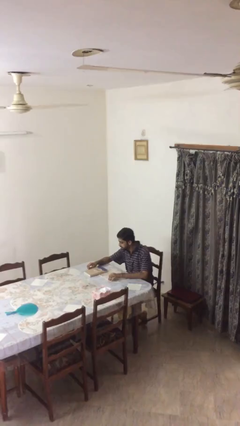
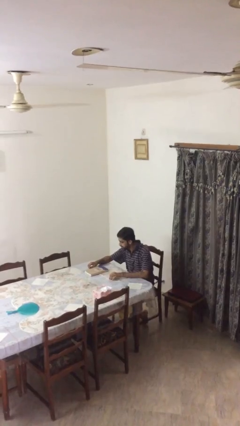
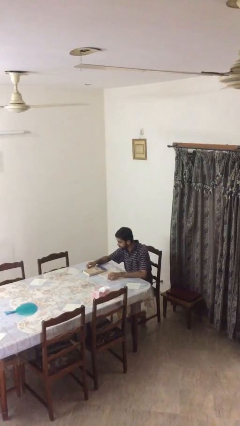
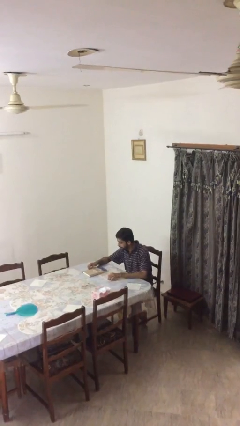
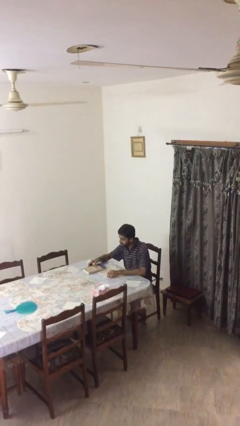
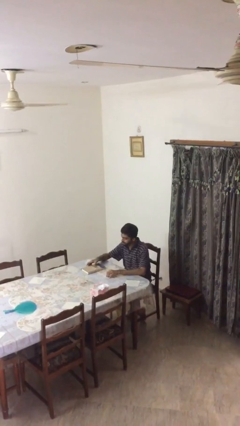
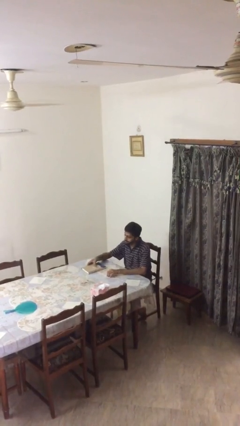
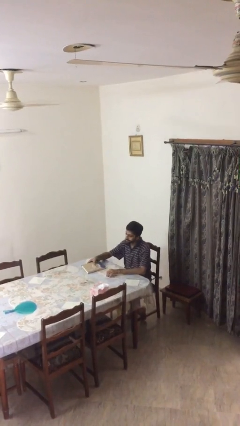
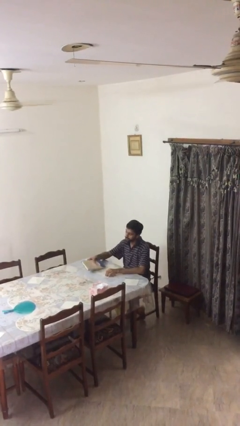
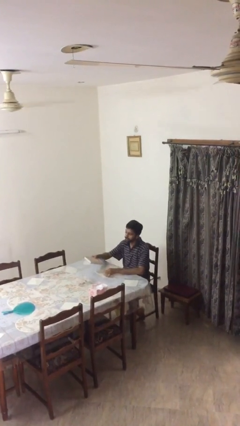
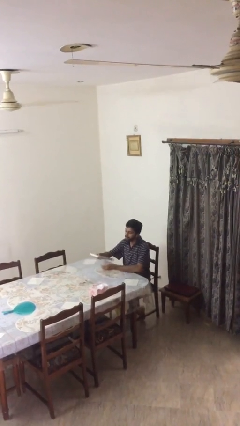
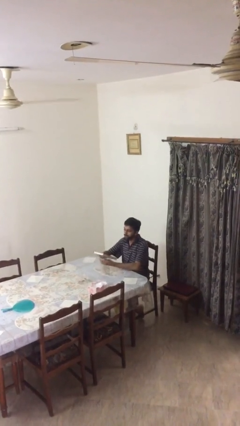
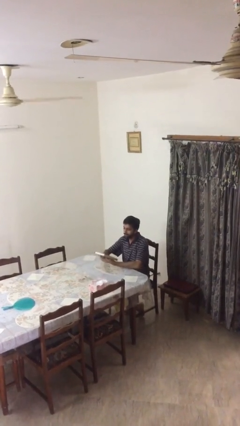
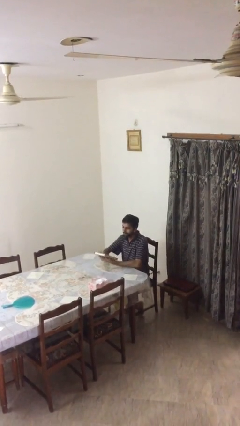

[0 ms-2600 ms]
person picks up object from table

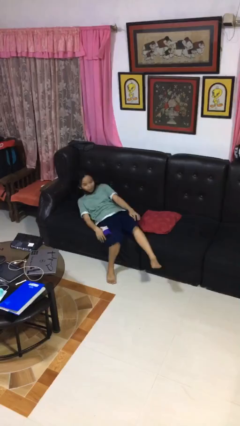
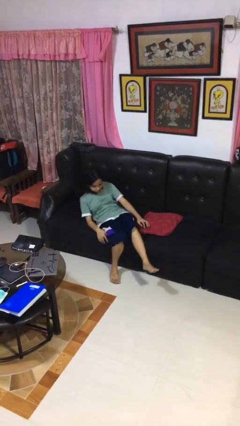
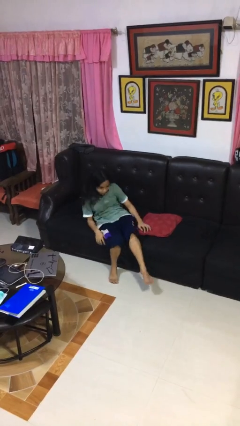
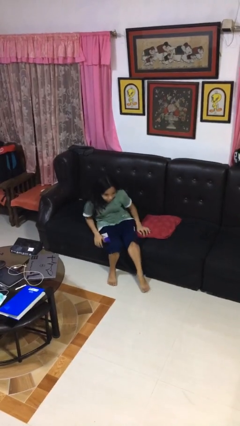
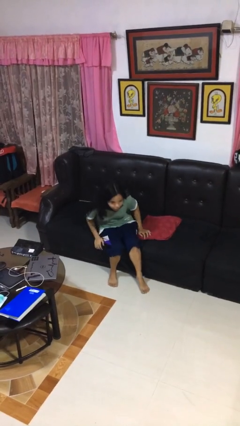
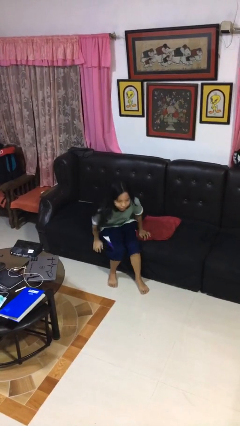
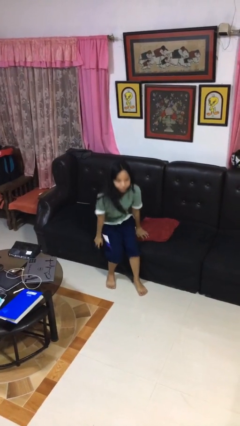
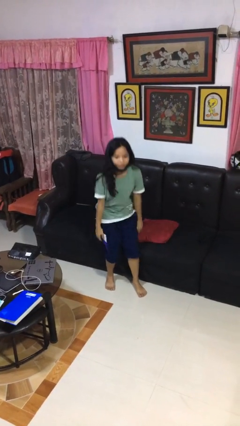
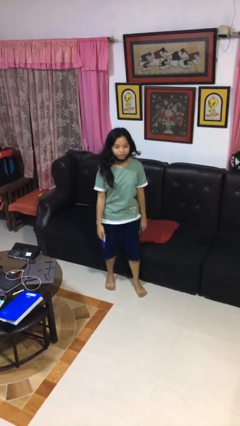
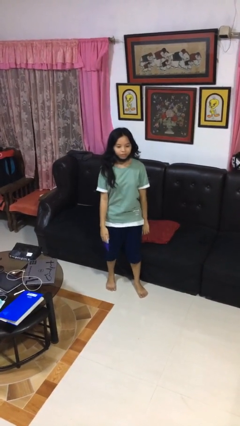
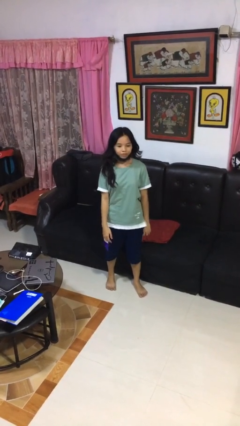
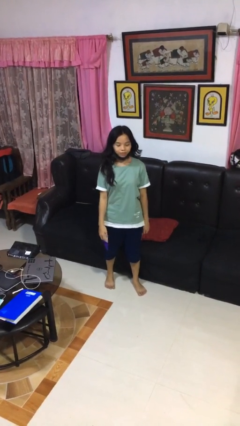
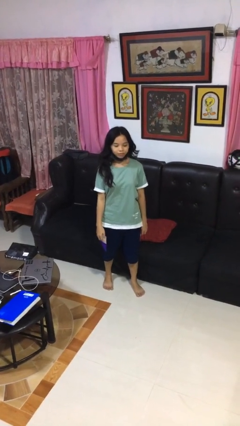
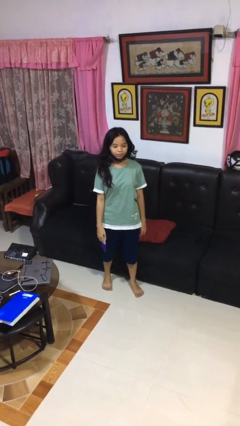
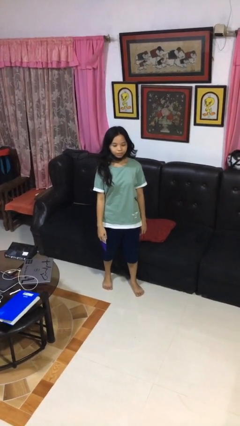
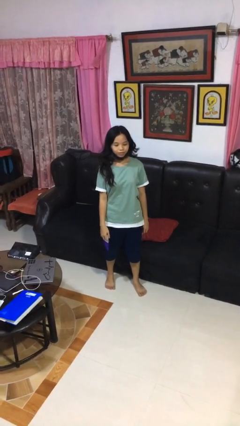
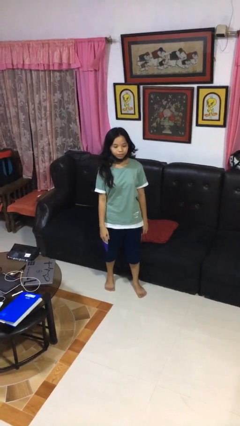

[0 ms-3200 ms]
person stands up

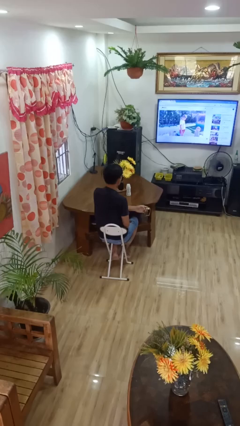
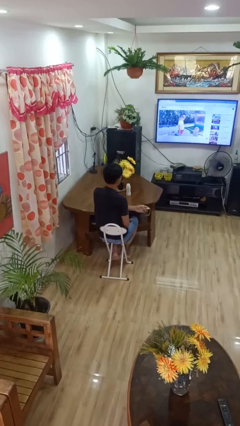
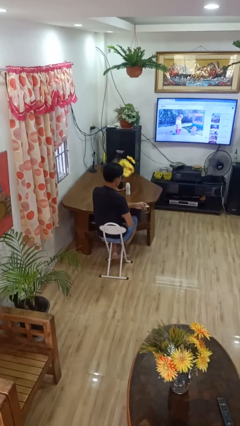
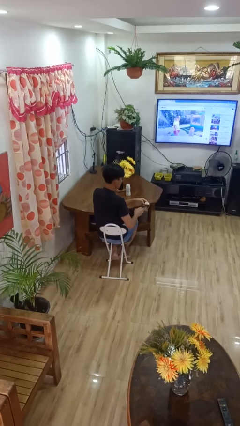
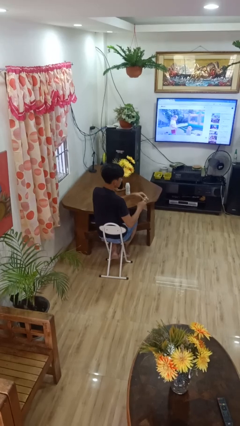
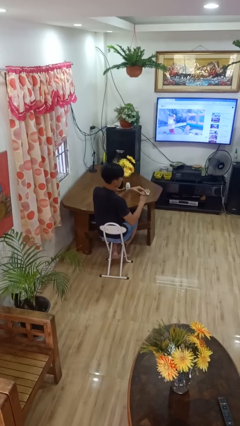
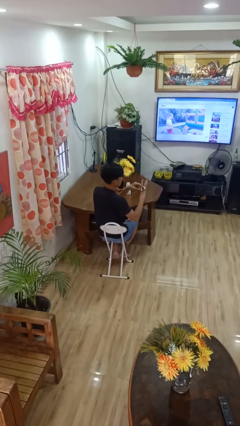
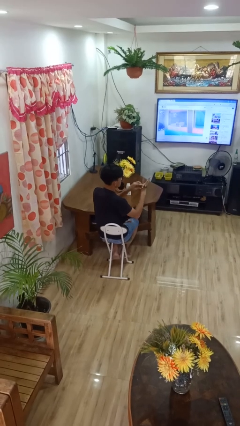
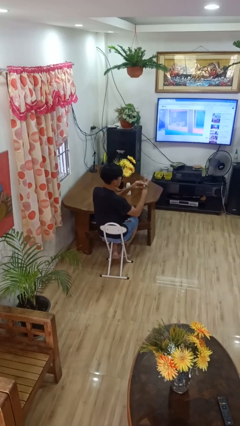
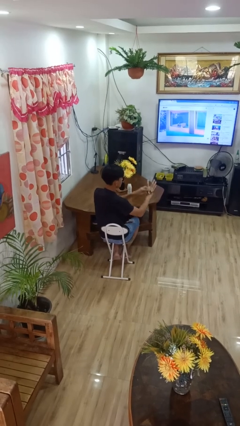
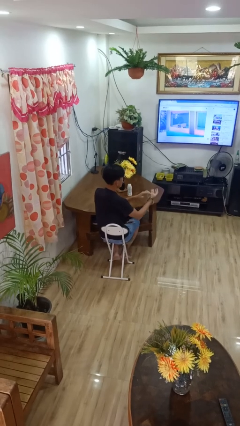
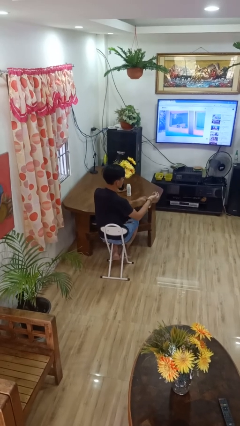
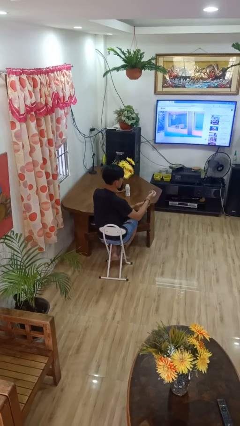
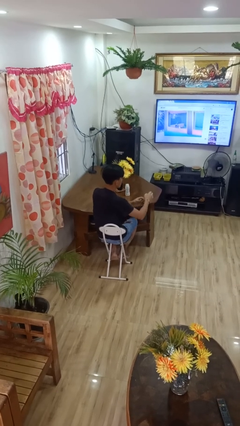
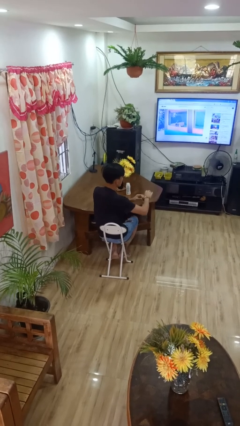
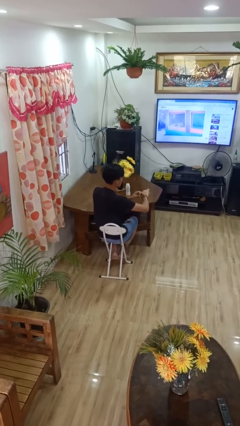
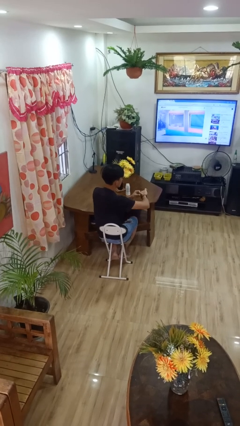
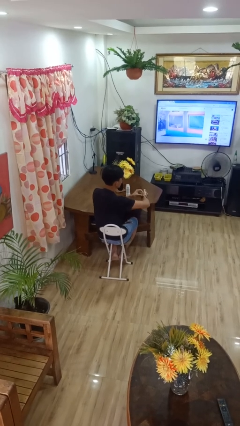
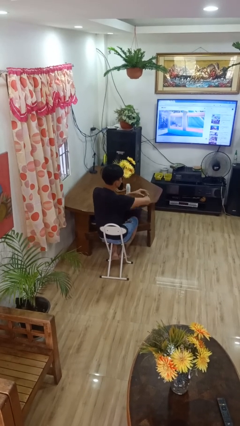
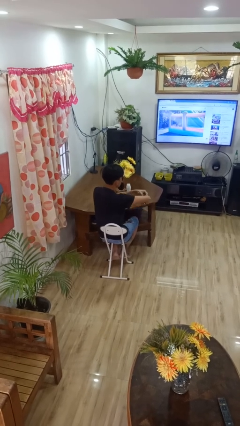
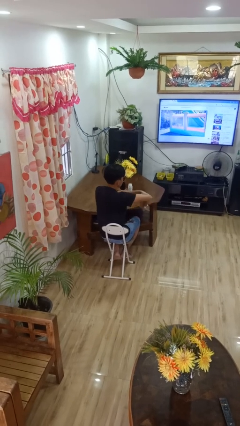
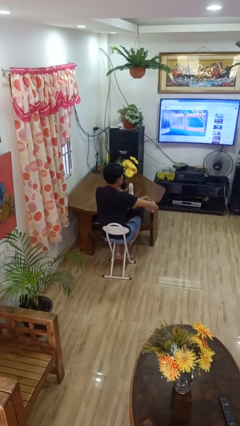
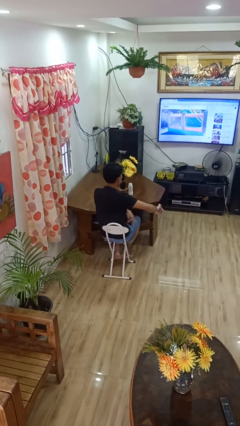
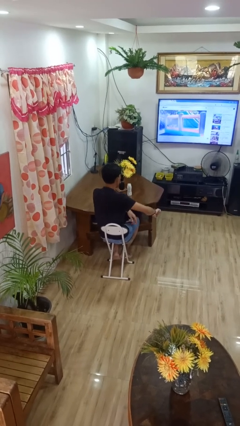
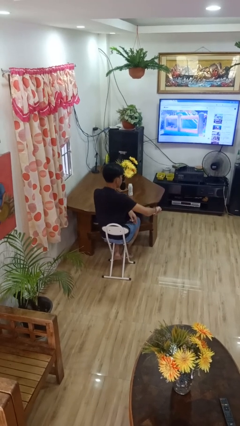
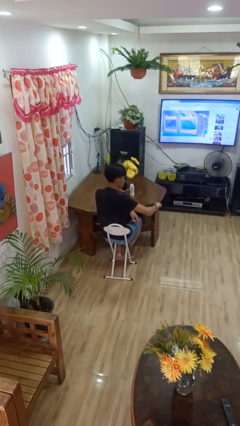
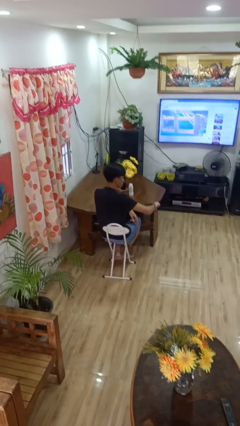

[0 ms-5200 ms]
person puts on wristwatch

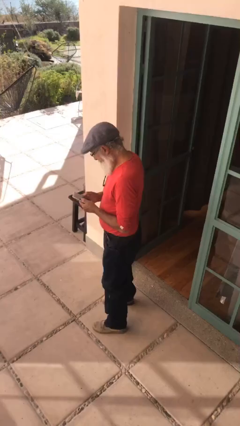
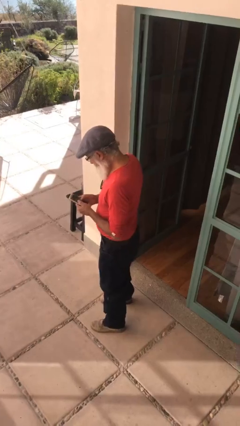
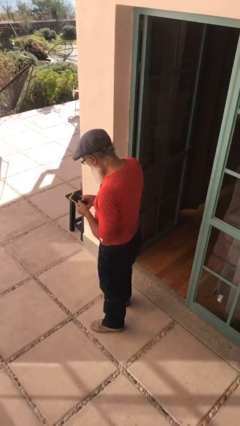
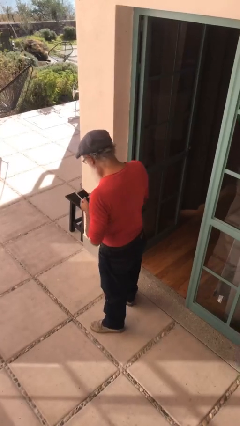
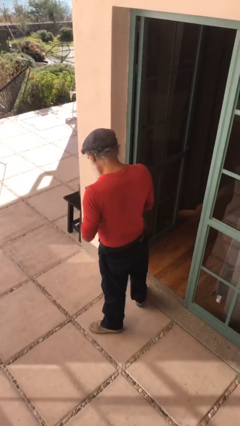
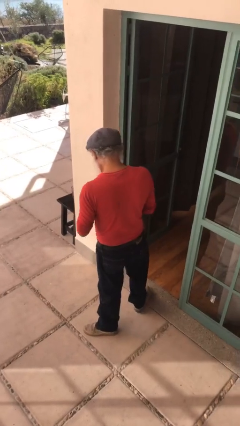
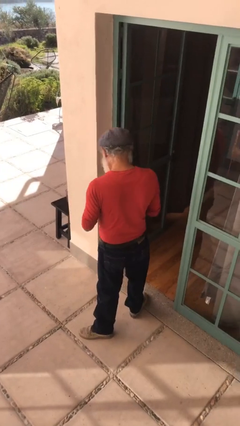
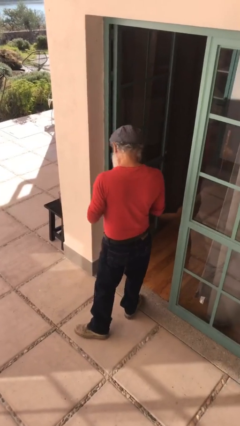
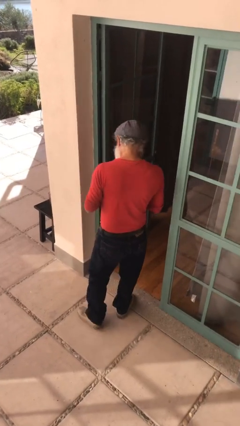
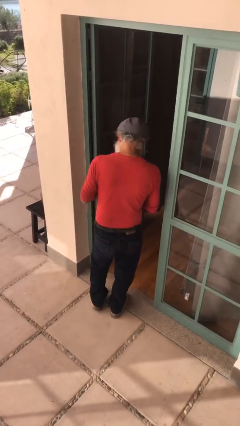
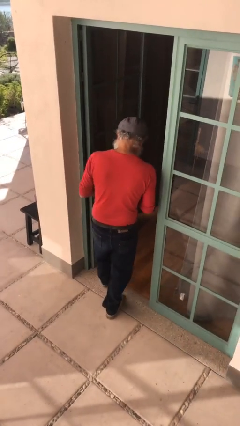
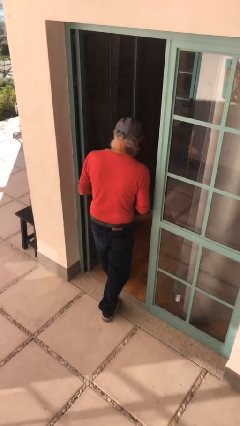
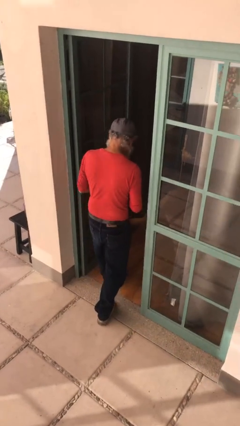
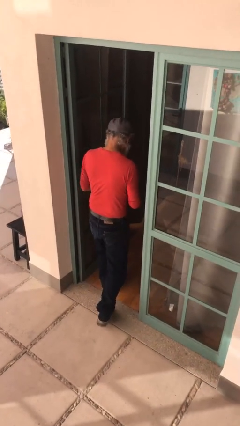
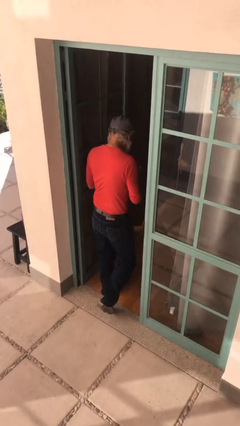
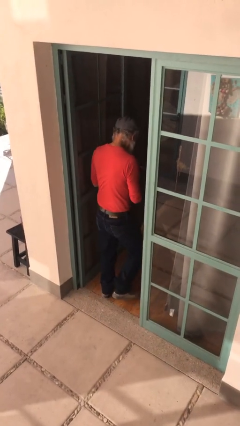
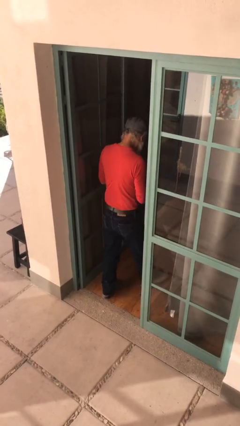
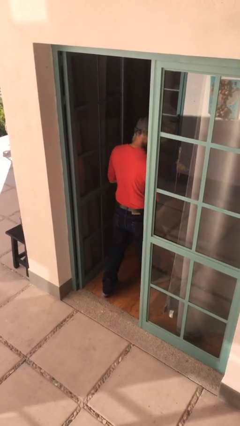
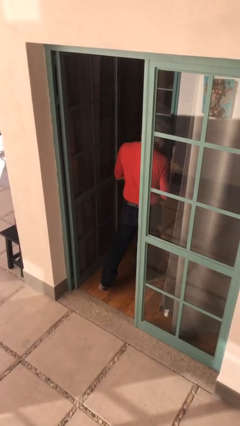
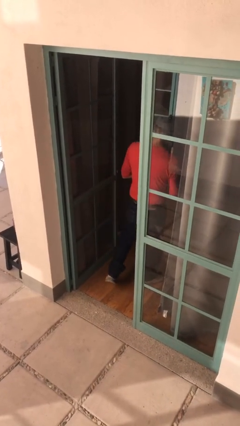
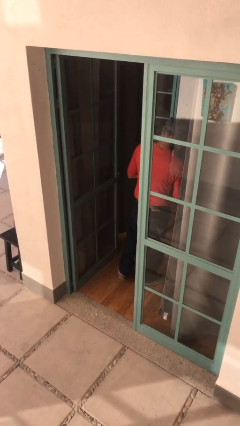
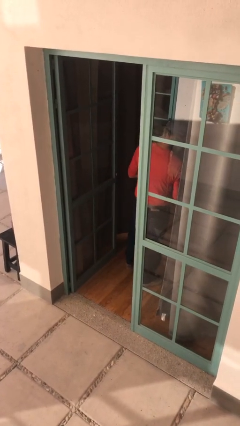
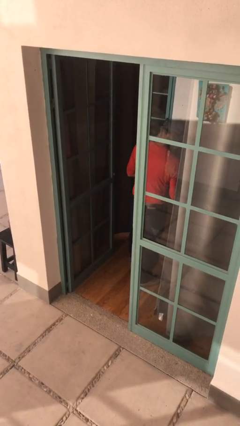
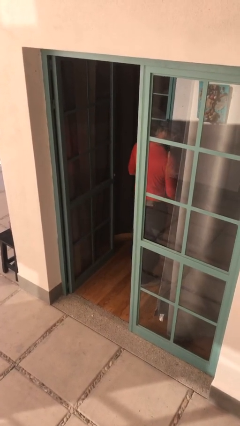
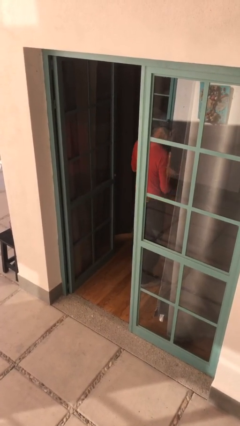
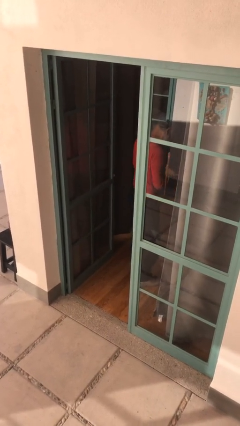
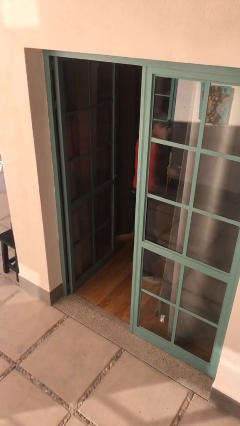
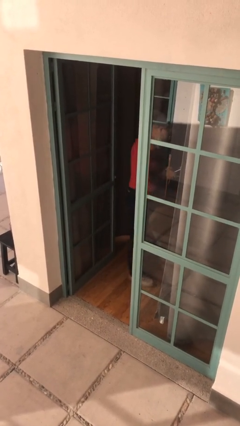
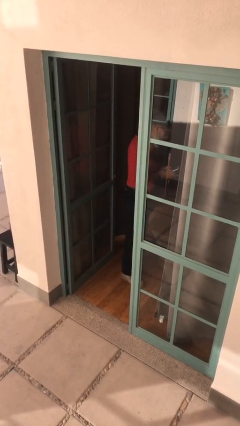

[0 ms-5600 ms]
person exits scene through structure

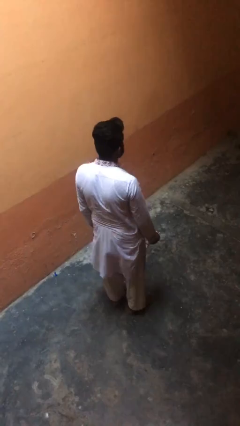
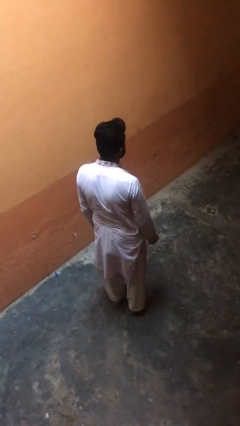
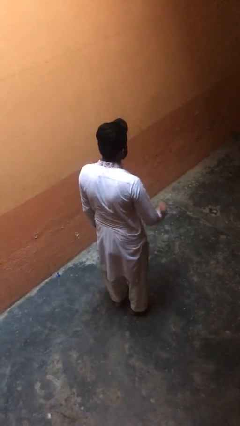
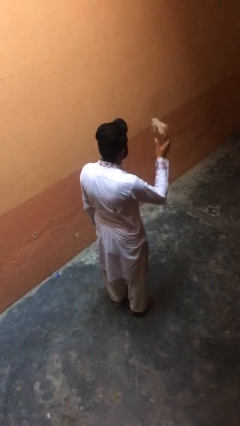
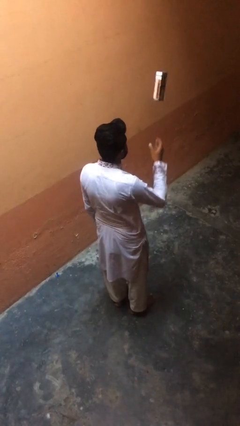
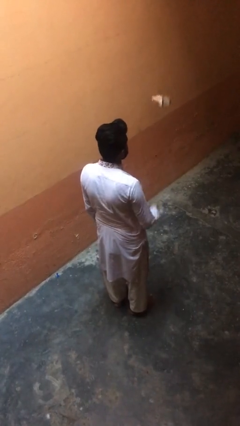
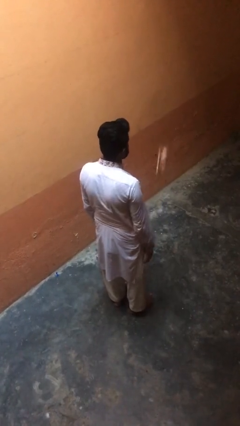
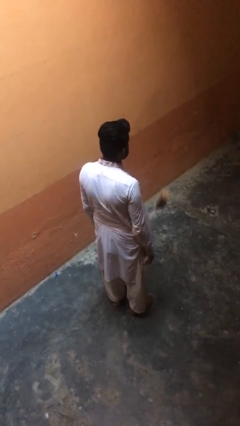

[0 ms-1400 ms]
person throws object into air
